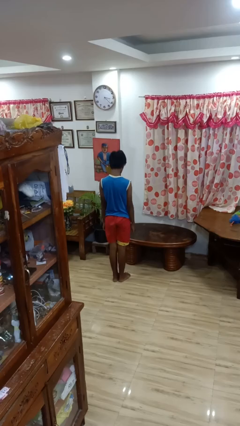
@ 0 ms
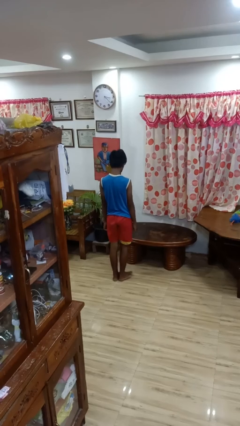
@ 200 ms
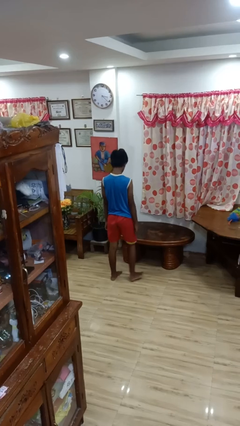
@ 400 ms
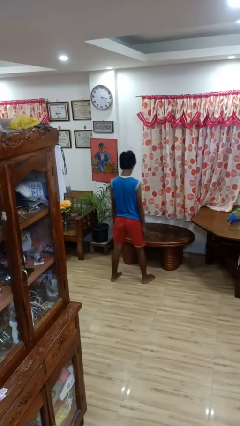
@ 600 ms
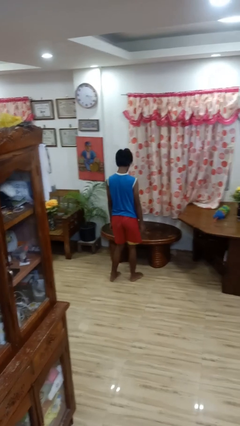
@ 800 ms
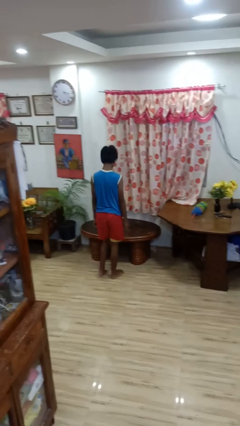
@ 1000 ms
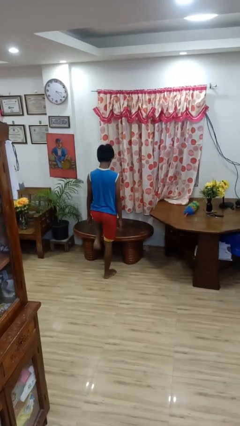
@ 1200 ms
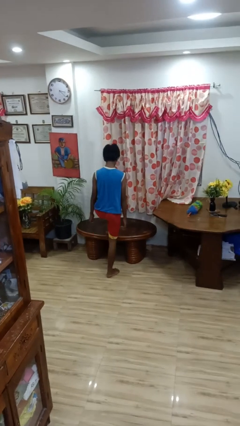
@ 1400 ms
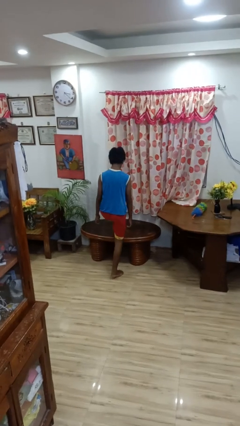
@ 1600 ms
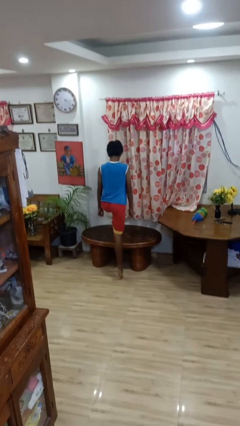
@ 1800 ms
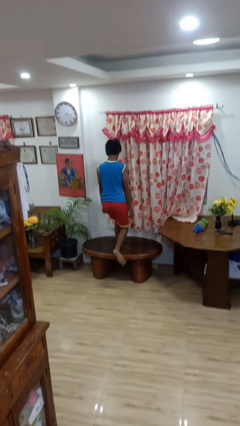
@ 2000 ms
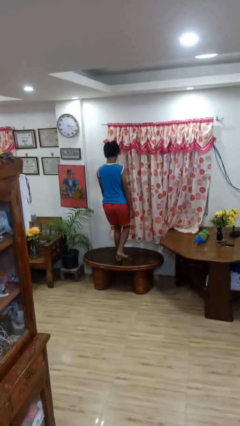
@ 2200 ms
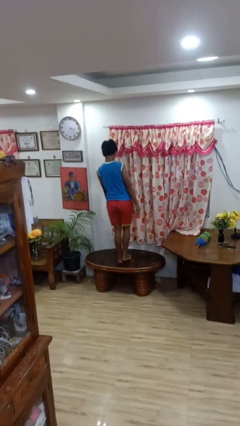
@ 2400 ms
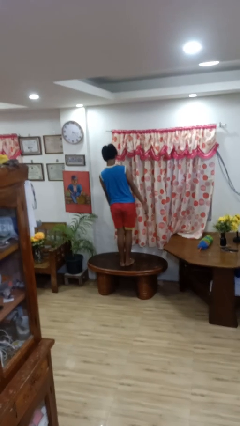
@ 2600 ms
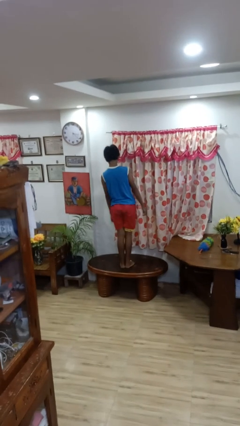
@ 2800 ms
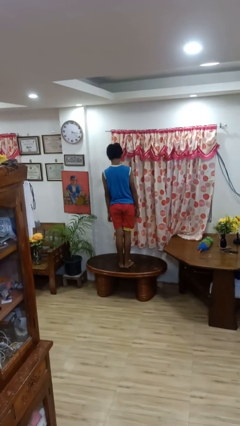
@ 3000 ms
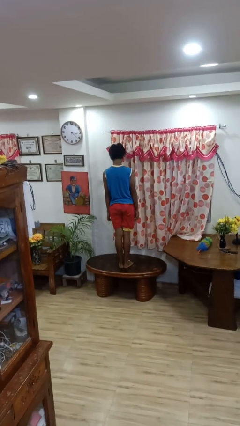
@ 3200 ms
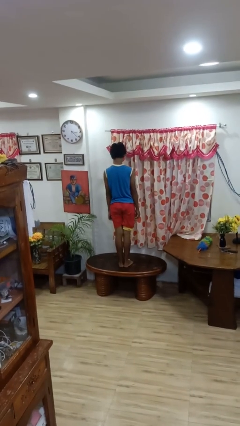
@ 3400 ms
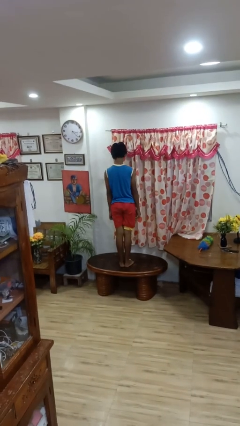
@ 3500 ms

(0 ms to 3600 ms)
person climbs on table

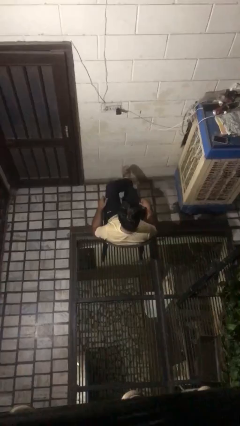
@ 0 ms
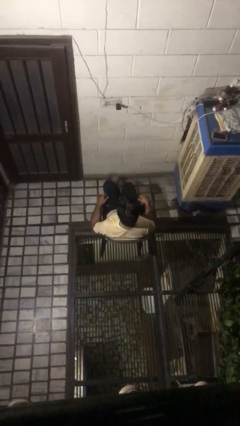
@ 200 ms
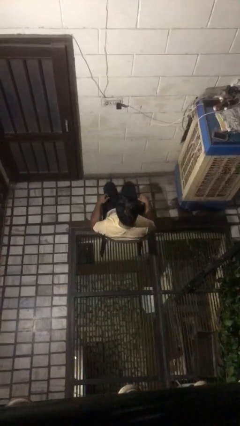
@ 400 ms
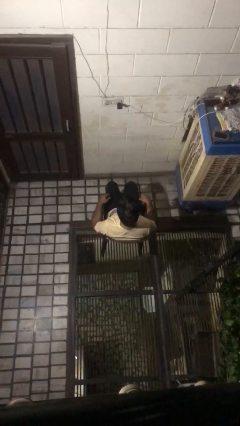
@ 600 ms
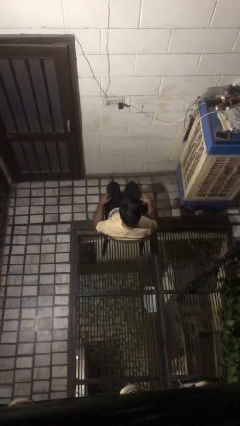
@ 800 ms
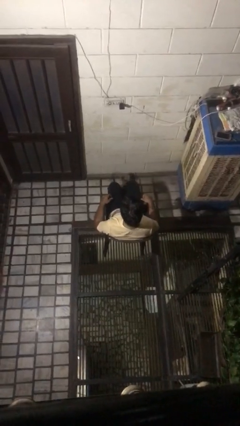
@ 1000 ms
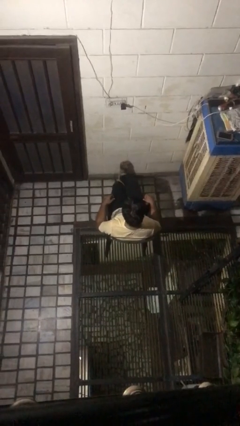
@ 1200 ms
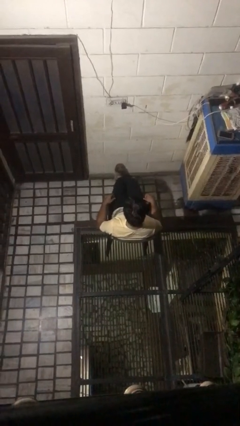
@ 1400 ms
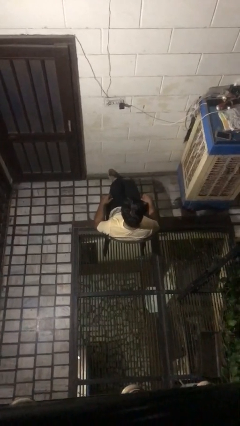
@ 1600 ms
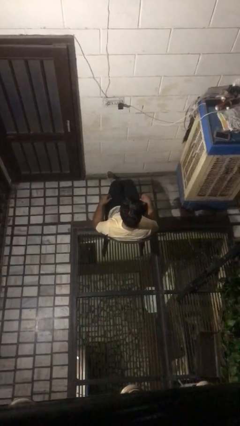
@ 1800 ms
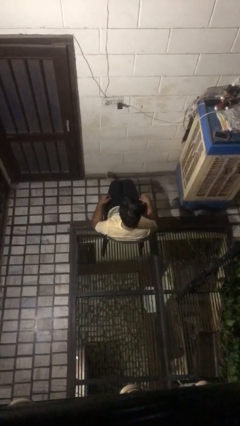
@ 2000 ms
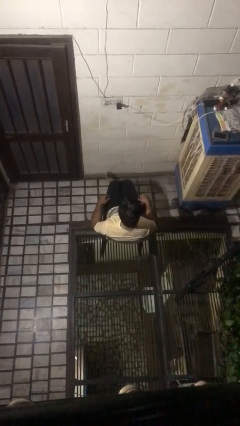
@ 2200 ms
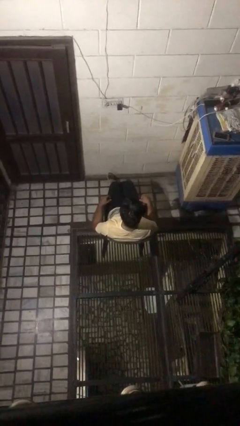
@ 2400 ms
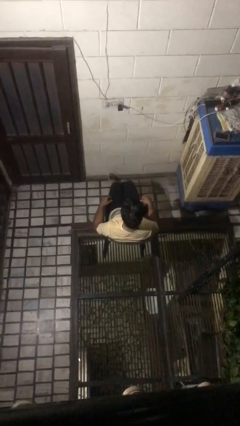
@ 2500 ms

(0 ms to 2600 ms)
person crosses legs

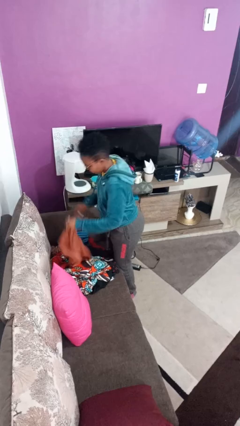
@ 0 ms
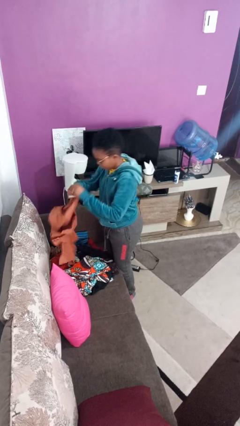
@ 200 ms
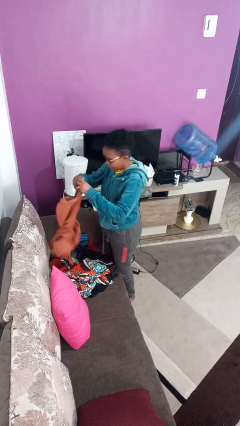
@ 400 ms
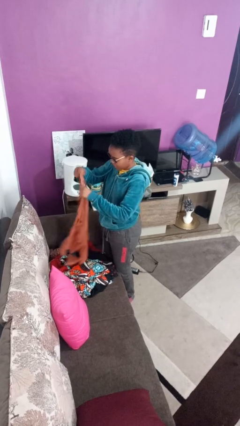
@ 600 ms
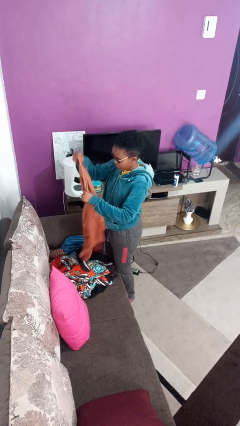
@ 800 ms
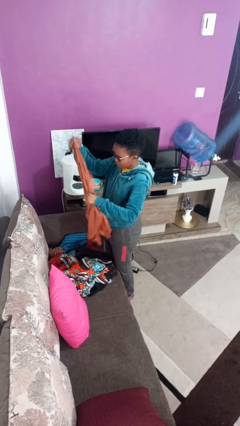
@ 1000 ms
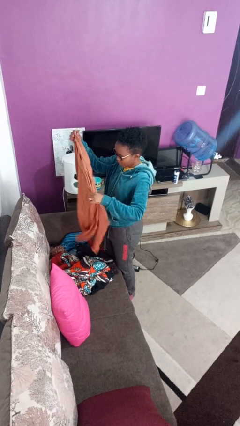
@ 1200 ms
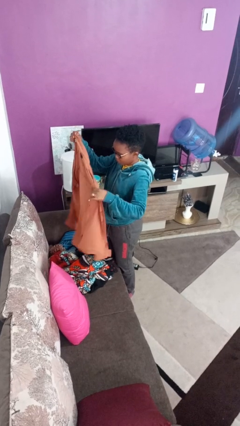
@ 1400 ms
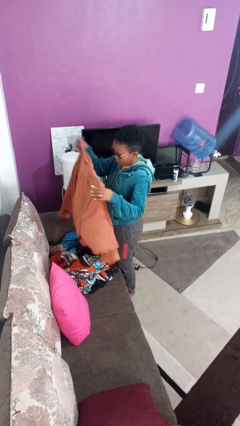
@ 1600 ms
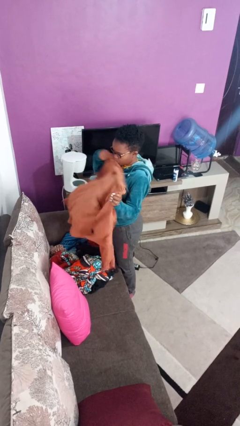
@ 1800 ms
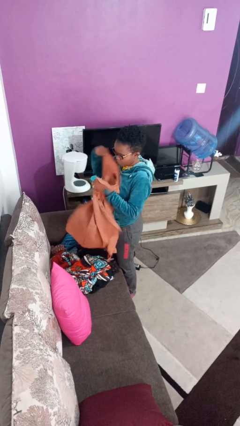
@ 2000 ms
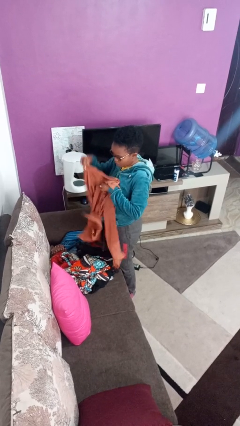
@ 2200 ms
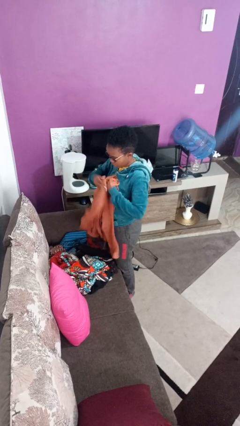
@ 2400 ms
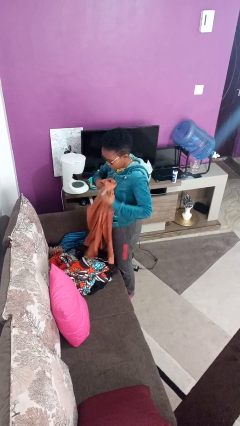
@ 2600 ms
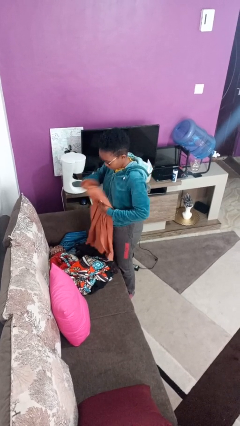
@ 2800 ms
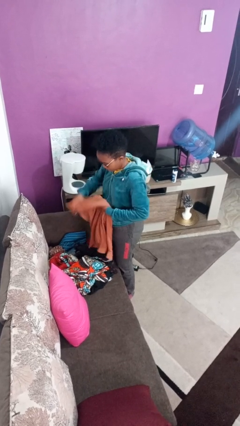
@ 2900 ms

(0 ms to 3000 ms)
person folds shirt

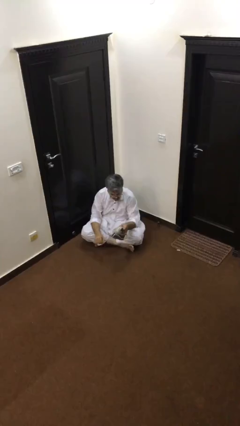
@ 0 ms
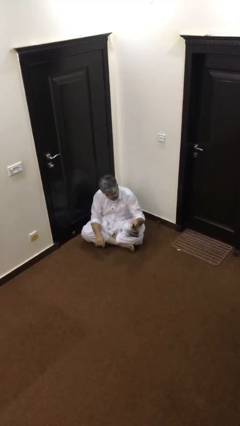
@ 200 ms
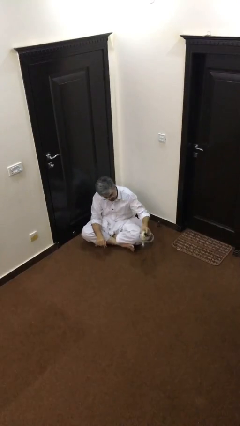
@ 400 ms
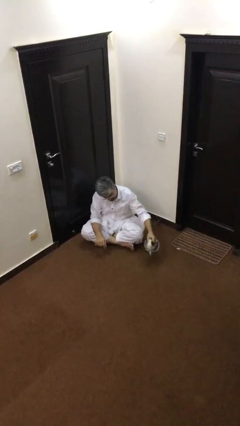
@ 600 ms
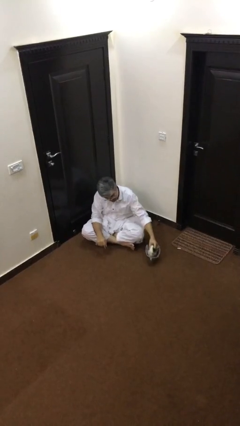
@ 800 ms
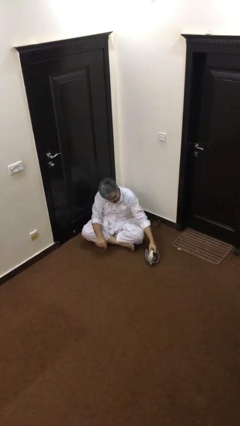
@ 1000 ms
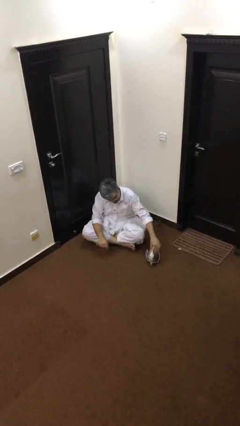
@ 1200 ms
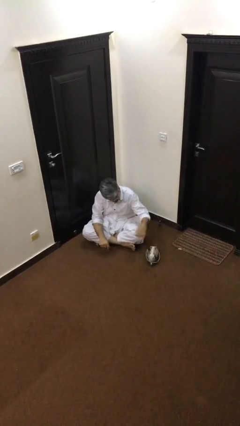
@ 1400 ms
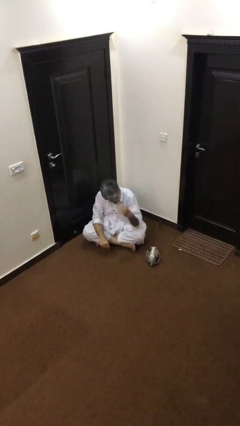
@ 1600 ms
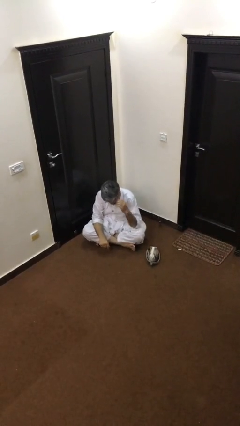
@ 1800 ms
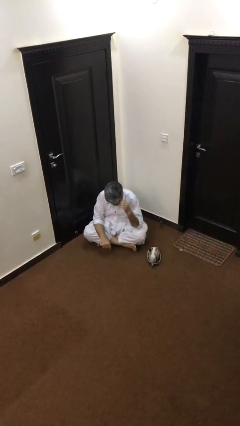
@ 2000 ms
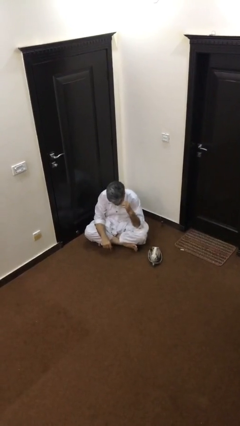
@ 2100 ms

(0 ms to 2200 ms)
person puts down object on floor

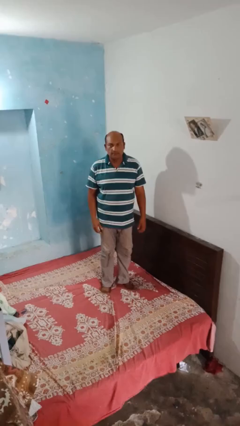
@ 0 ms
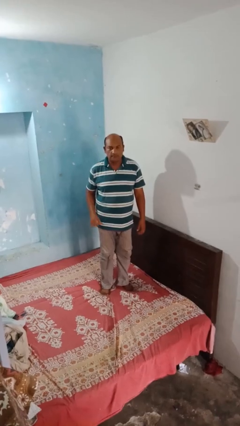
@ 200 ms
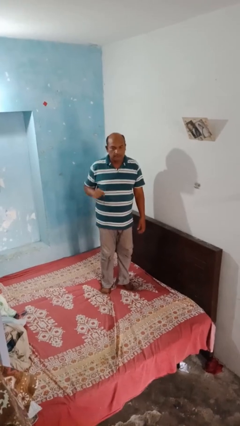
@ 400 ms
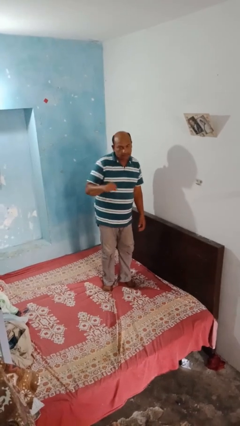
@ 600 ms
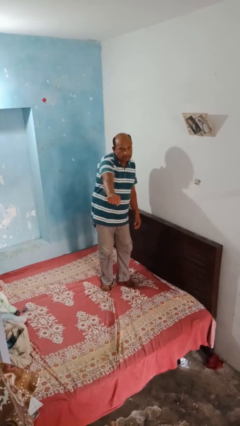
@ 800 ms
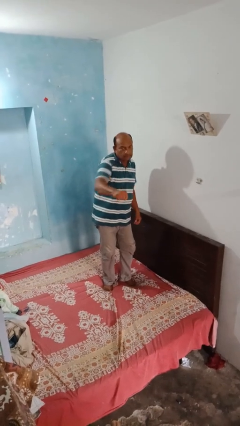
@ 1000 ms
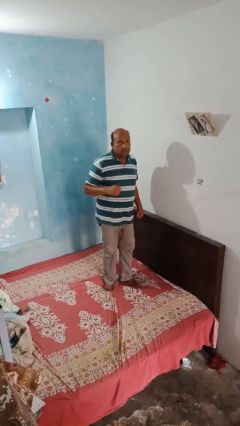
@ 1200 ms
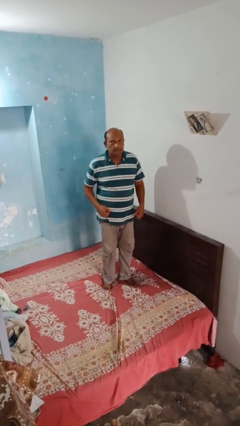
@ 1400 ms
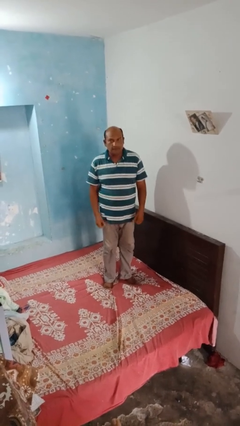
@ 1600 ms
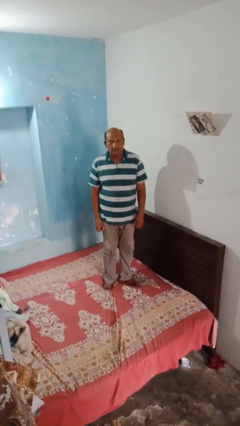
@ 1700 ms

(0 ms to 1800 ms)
person karate chop

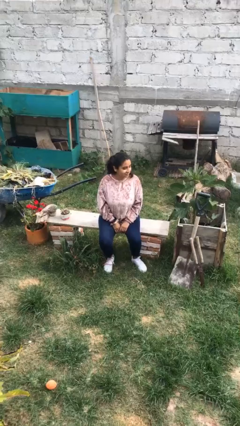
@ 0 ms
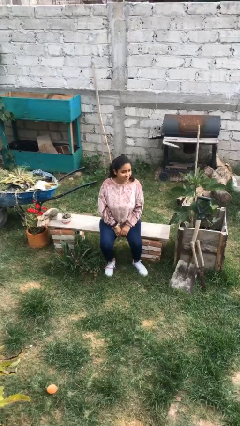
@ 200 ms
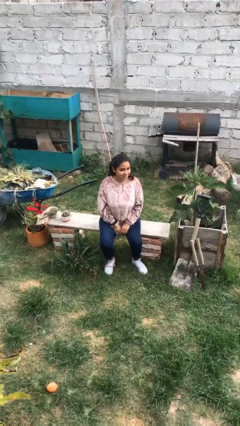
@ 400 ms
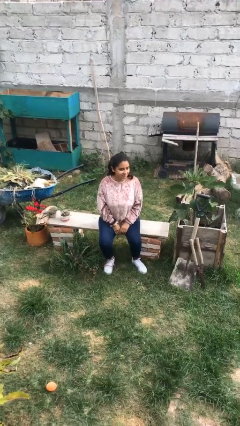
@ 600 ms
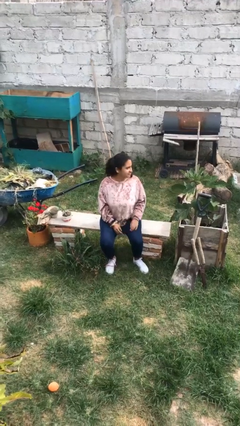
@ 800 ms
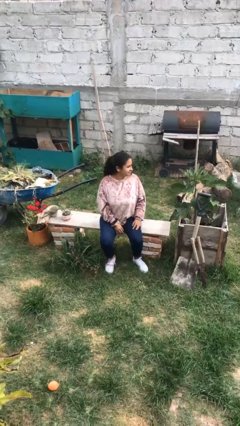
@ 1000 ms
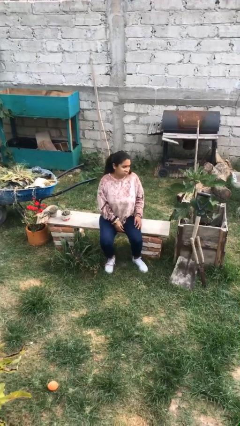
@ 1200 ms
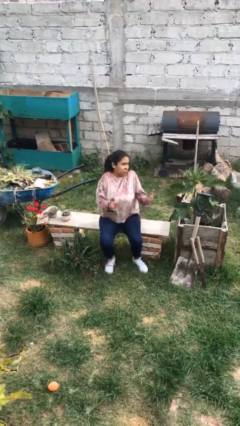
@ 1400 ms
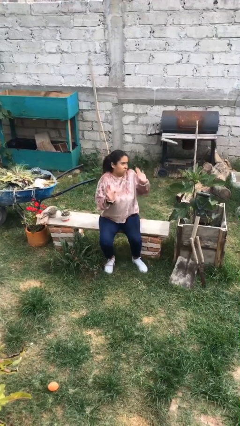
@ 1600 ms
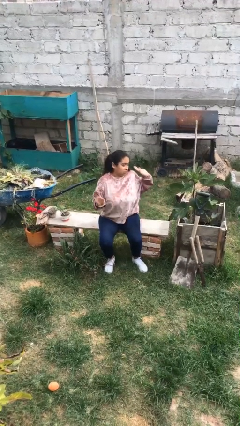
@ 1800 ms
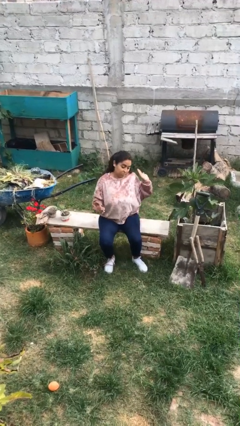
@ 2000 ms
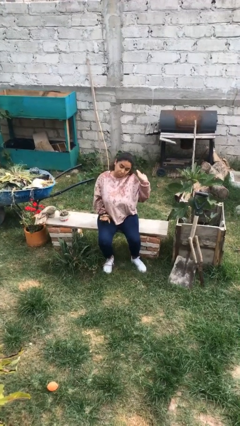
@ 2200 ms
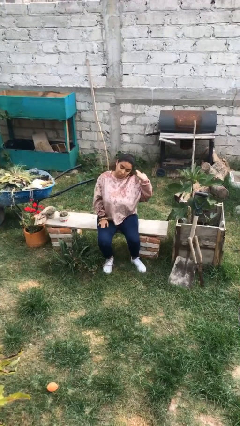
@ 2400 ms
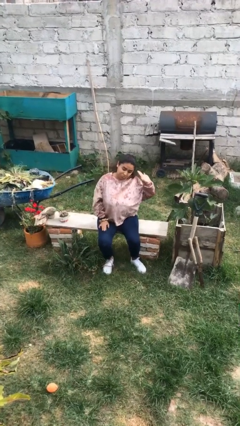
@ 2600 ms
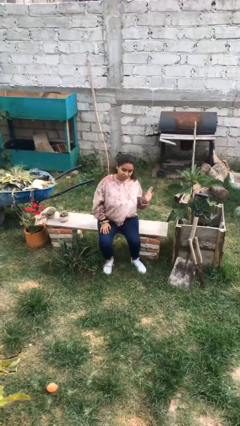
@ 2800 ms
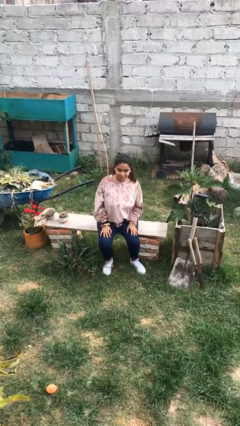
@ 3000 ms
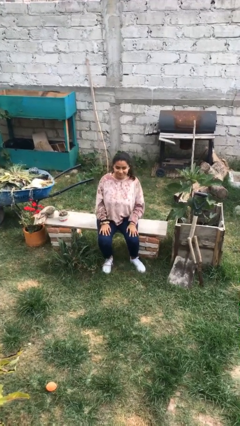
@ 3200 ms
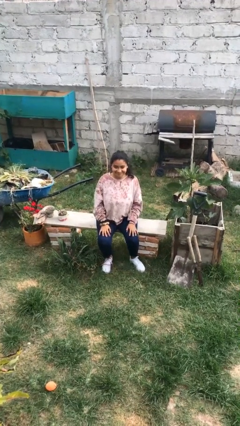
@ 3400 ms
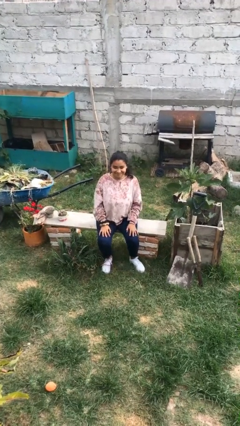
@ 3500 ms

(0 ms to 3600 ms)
person shrugs

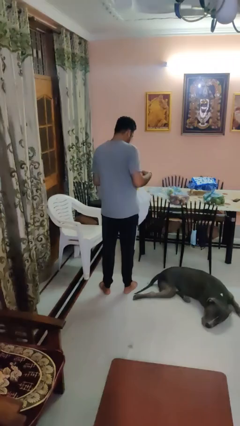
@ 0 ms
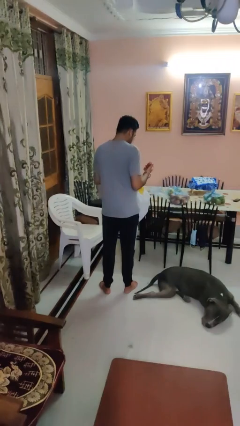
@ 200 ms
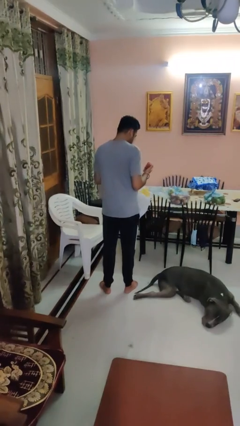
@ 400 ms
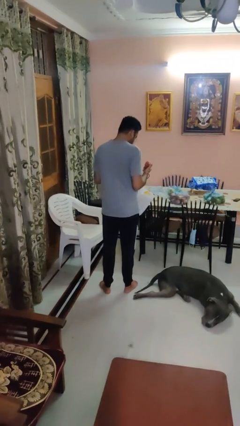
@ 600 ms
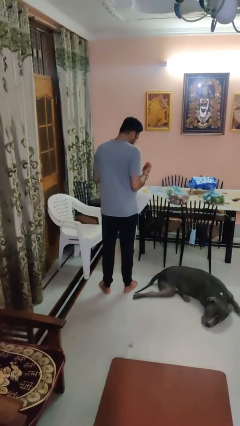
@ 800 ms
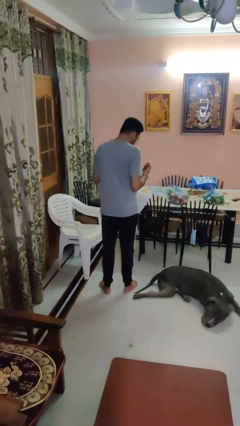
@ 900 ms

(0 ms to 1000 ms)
person takes object from bag
